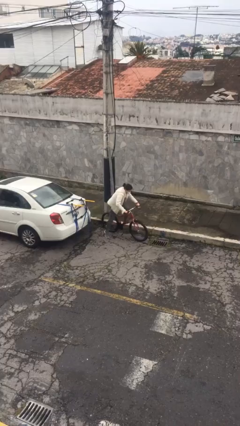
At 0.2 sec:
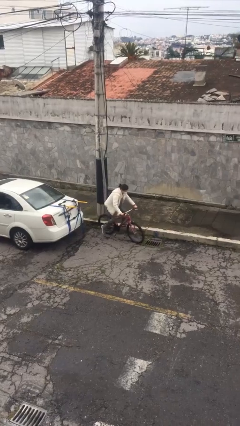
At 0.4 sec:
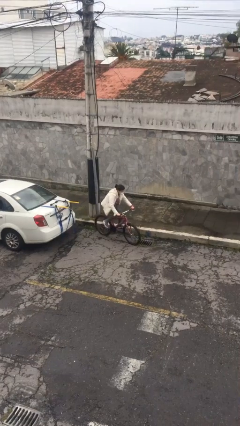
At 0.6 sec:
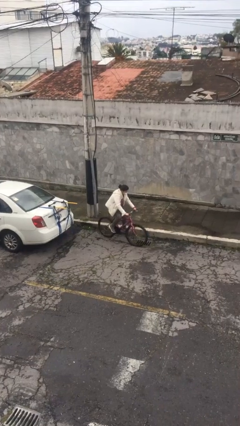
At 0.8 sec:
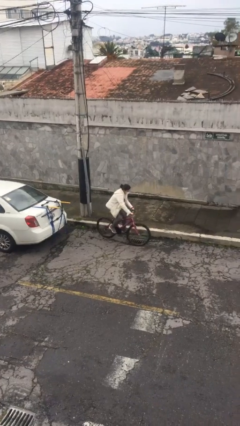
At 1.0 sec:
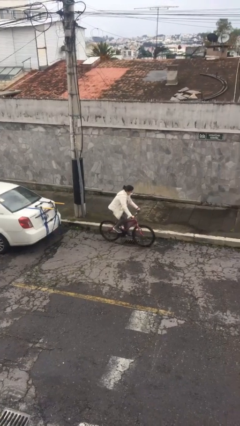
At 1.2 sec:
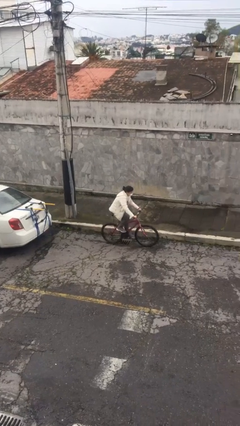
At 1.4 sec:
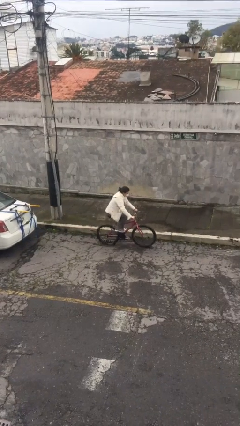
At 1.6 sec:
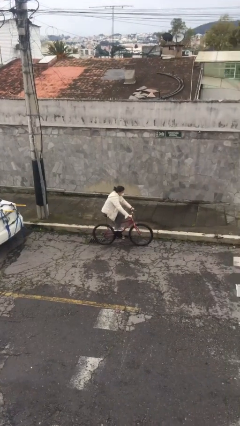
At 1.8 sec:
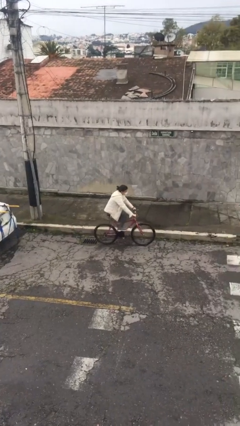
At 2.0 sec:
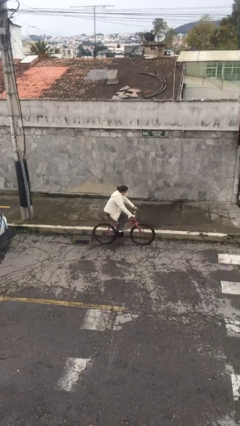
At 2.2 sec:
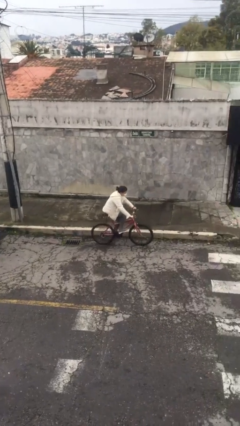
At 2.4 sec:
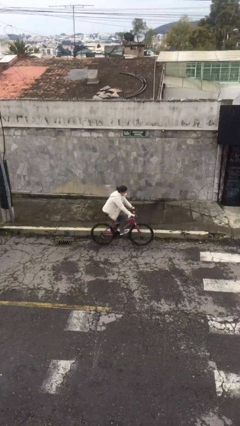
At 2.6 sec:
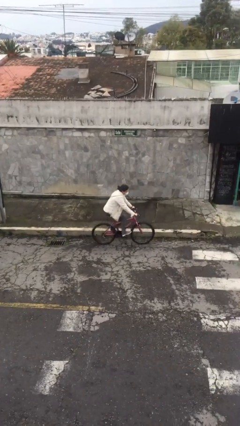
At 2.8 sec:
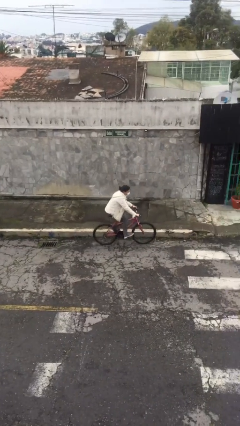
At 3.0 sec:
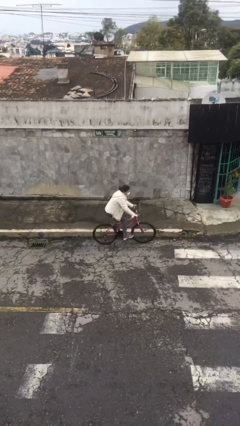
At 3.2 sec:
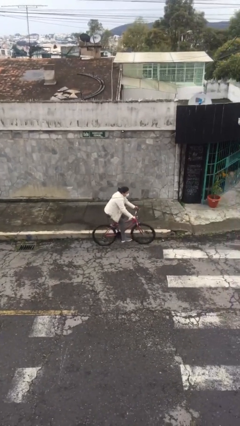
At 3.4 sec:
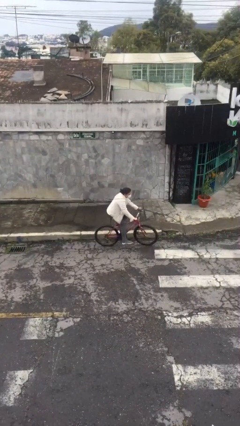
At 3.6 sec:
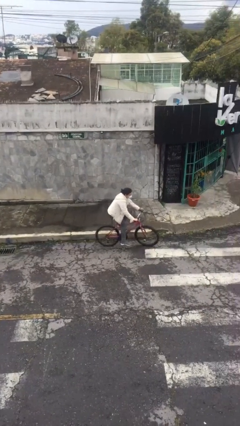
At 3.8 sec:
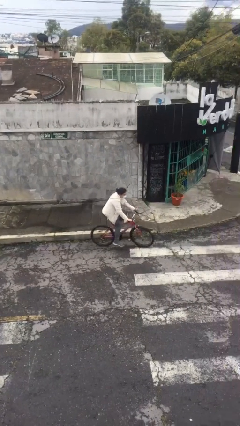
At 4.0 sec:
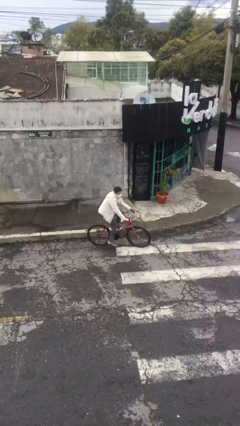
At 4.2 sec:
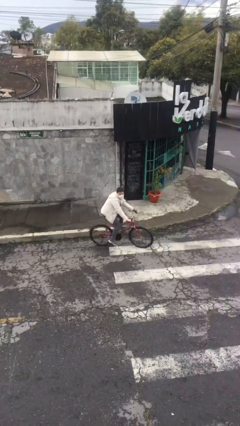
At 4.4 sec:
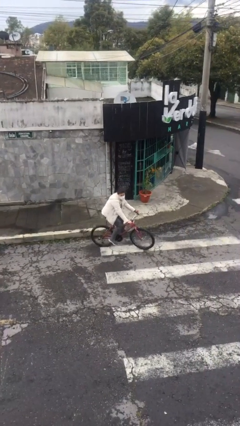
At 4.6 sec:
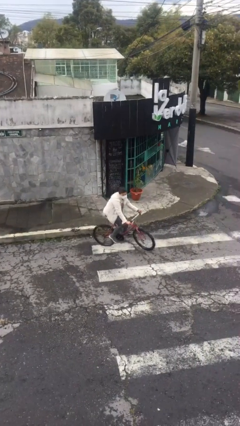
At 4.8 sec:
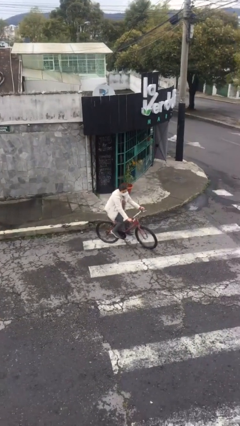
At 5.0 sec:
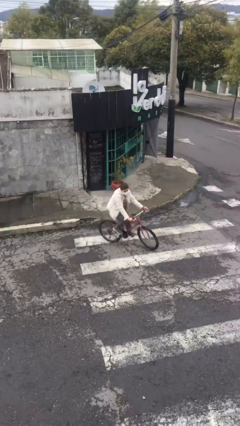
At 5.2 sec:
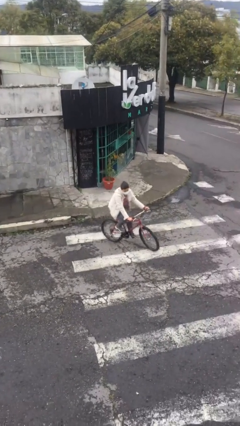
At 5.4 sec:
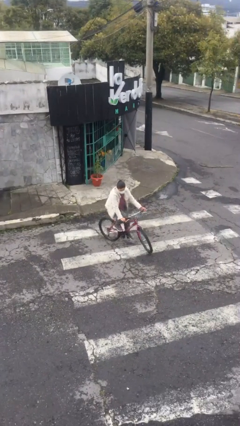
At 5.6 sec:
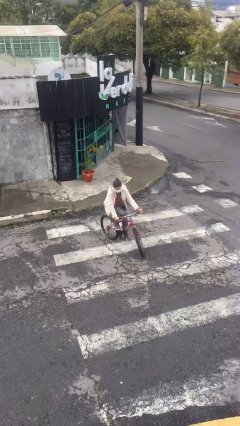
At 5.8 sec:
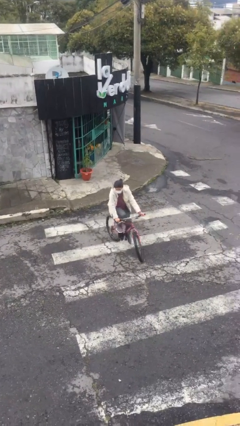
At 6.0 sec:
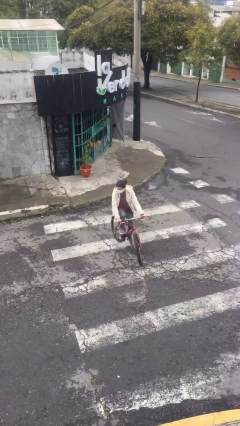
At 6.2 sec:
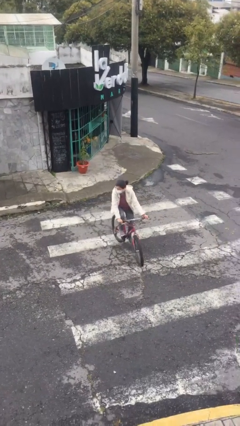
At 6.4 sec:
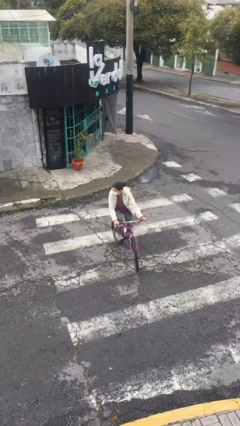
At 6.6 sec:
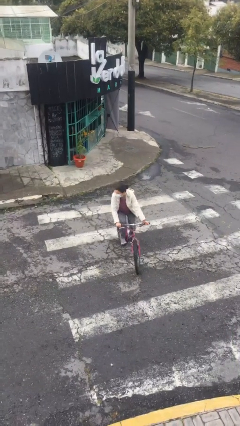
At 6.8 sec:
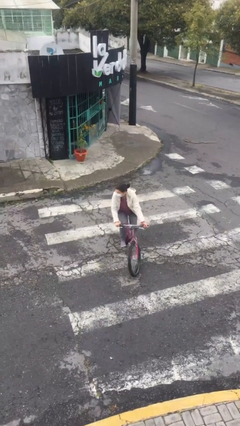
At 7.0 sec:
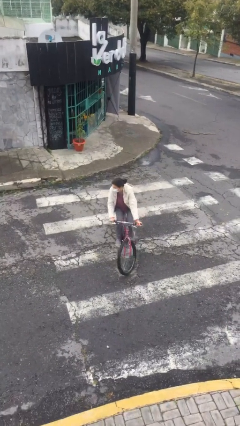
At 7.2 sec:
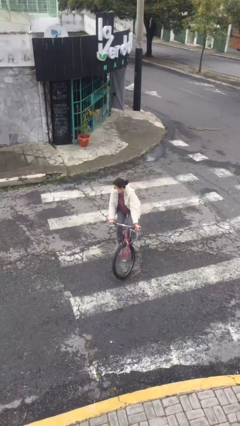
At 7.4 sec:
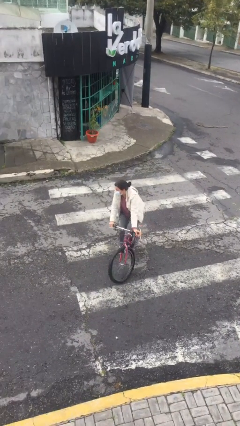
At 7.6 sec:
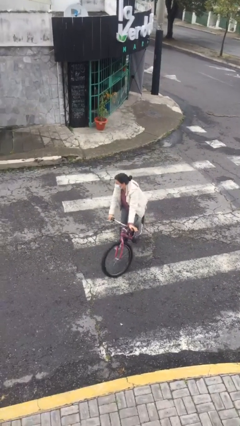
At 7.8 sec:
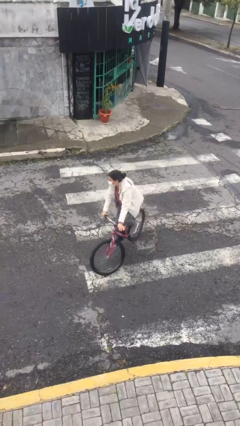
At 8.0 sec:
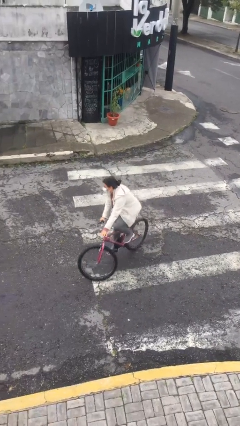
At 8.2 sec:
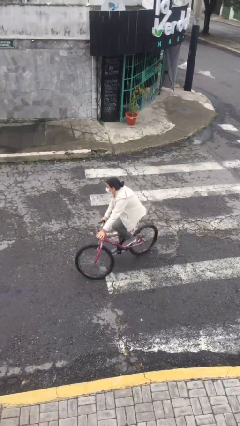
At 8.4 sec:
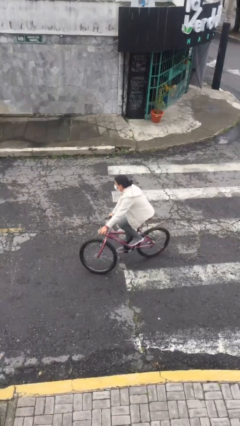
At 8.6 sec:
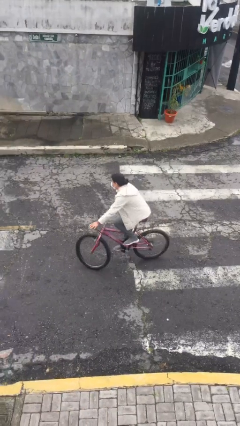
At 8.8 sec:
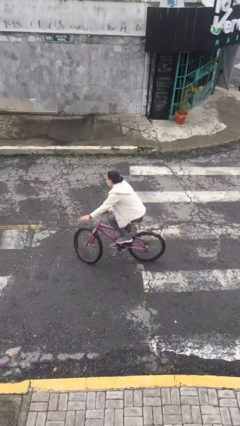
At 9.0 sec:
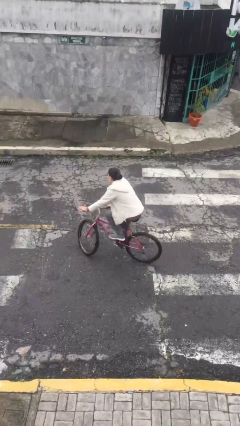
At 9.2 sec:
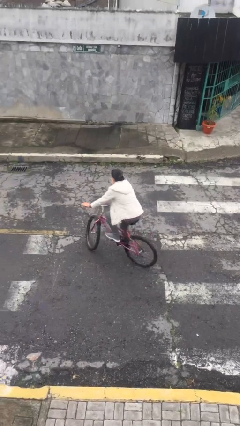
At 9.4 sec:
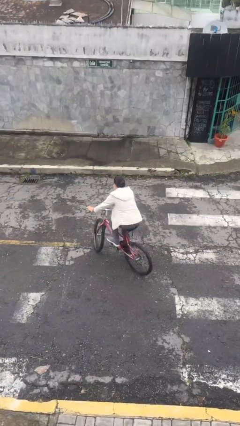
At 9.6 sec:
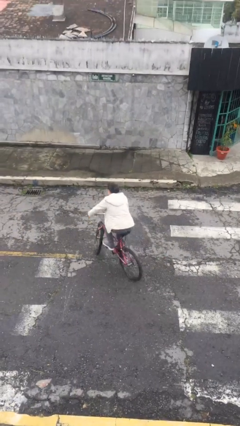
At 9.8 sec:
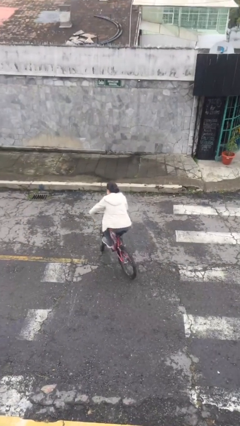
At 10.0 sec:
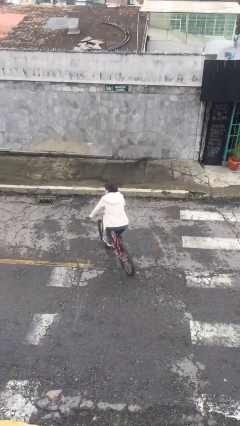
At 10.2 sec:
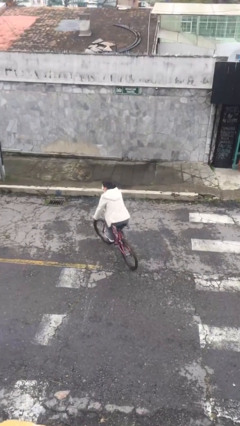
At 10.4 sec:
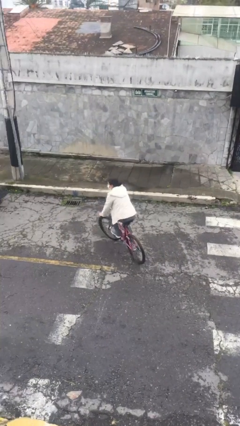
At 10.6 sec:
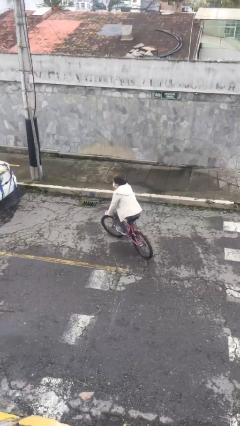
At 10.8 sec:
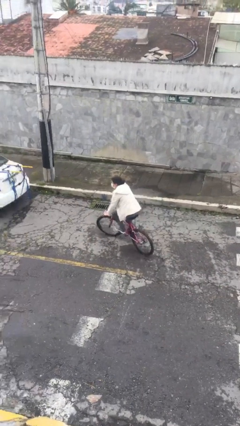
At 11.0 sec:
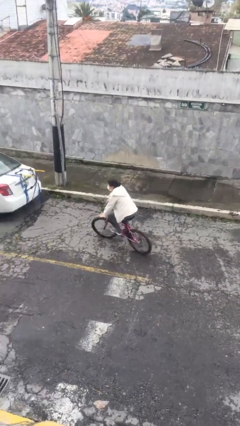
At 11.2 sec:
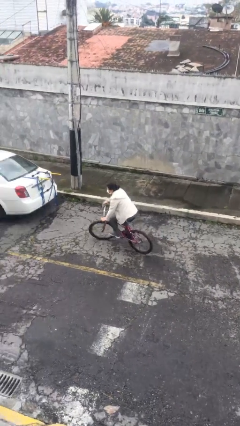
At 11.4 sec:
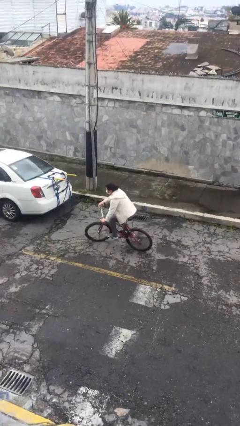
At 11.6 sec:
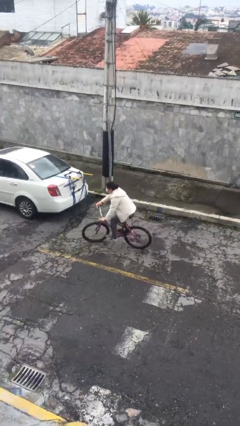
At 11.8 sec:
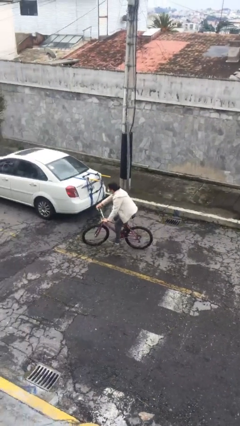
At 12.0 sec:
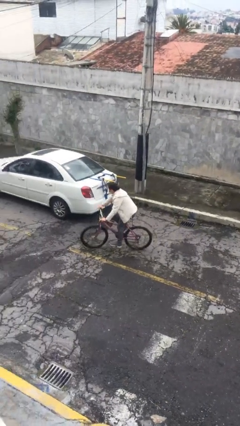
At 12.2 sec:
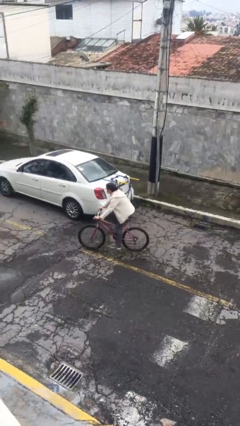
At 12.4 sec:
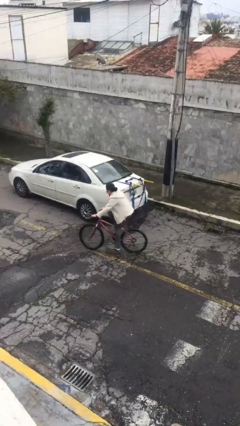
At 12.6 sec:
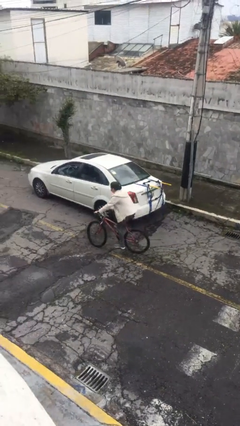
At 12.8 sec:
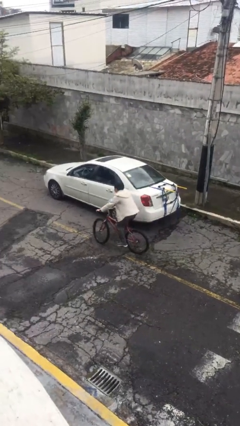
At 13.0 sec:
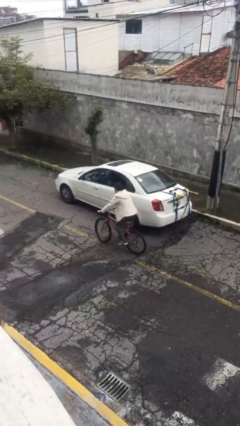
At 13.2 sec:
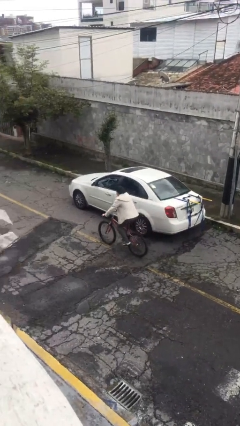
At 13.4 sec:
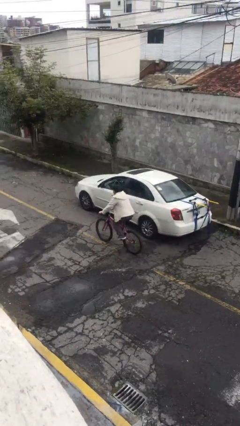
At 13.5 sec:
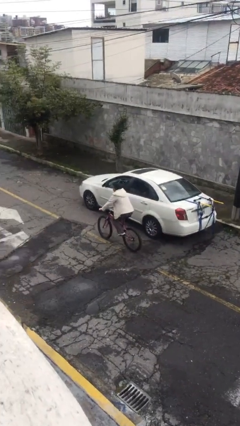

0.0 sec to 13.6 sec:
person rides bicycle

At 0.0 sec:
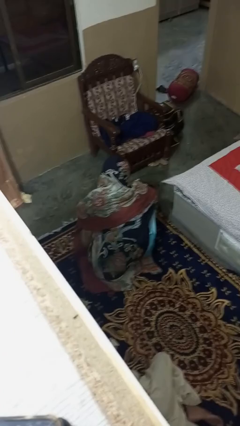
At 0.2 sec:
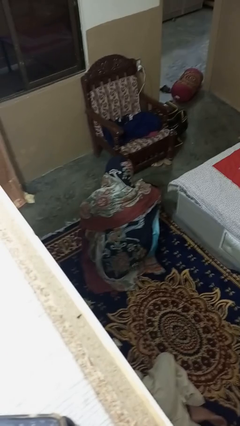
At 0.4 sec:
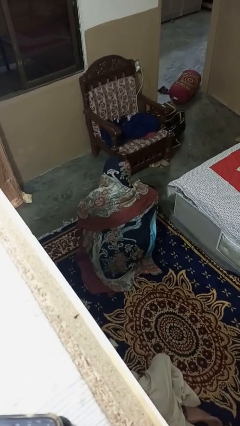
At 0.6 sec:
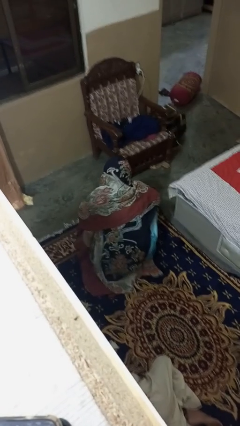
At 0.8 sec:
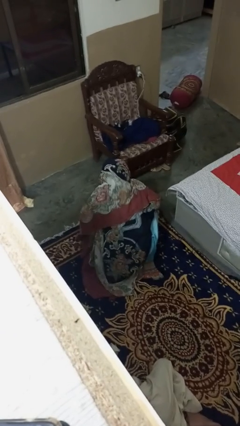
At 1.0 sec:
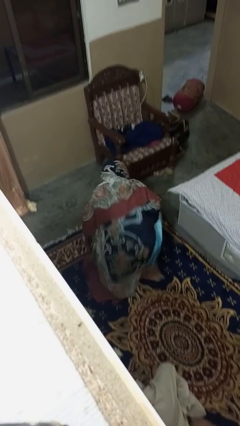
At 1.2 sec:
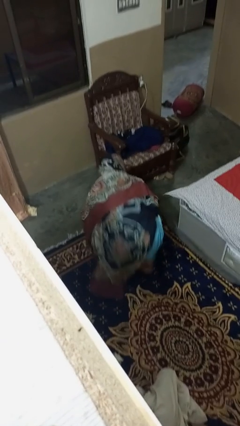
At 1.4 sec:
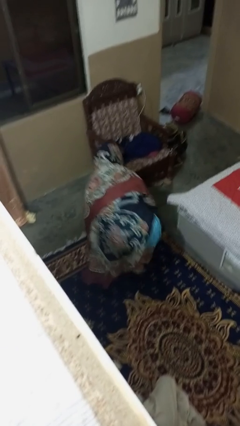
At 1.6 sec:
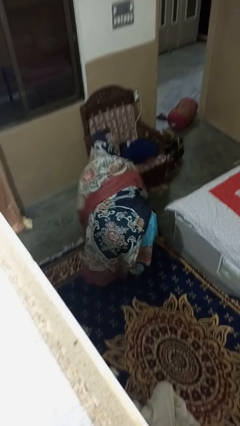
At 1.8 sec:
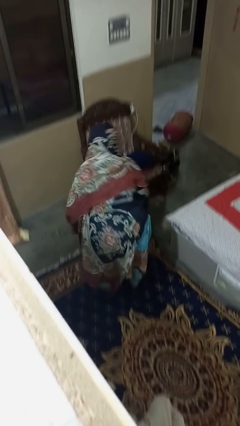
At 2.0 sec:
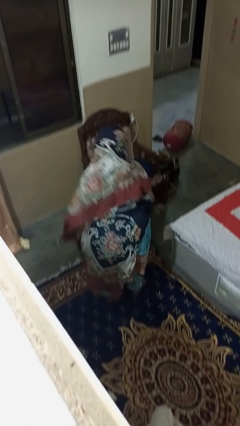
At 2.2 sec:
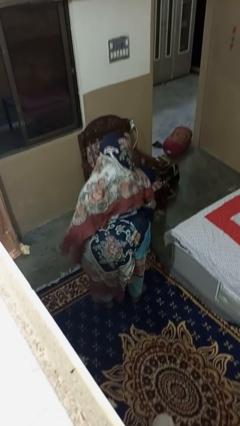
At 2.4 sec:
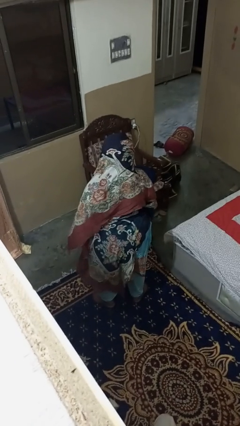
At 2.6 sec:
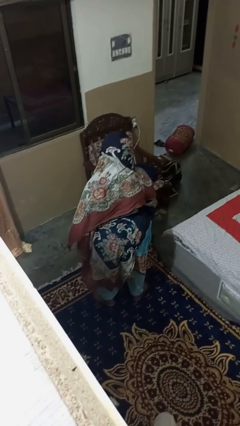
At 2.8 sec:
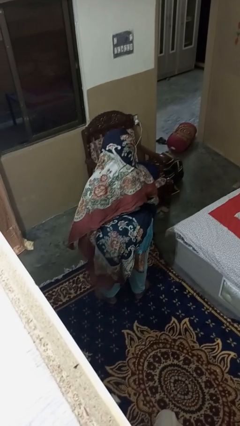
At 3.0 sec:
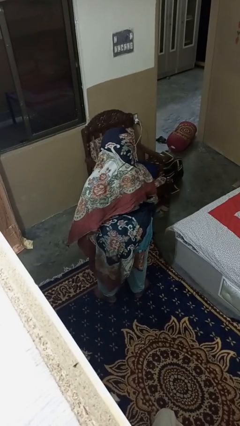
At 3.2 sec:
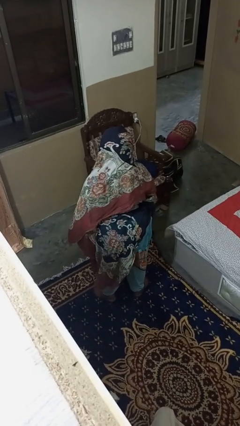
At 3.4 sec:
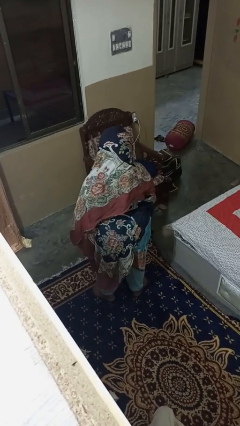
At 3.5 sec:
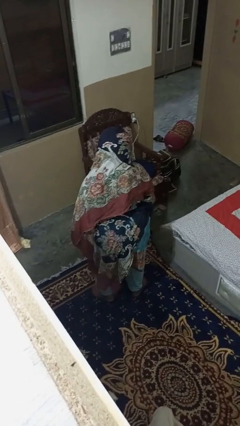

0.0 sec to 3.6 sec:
person stands up

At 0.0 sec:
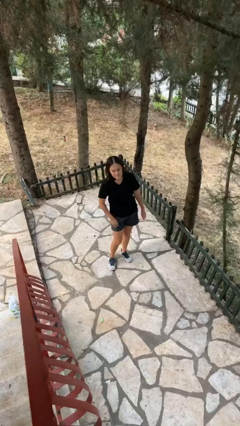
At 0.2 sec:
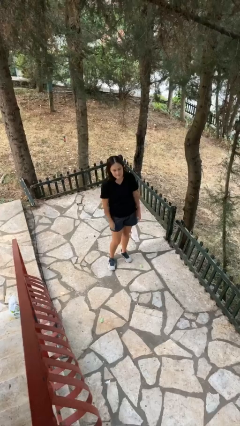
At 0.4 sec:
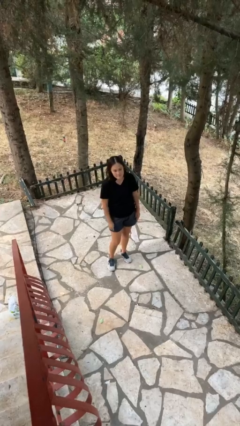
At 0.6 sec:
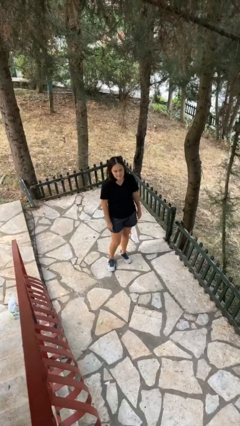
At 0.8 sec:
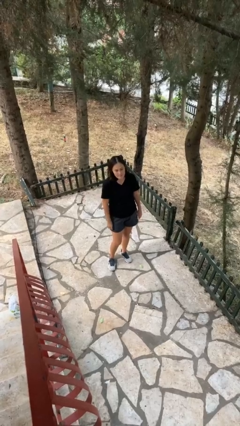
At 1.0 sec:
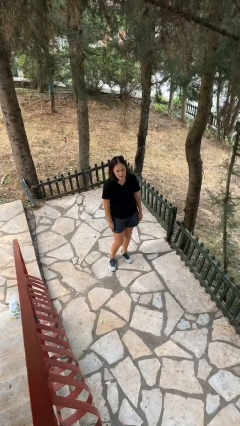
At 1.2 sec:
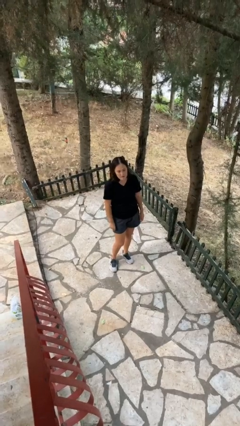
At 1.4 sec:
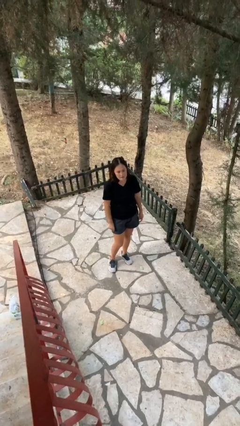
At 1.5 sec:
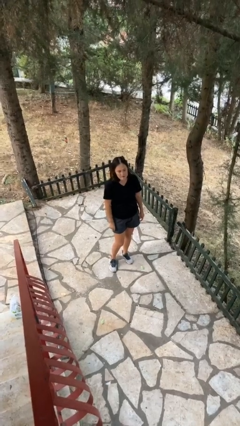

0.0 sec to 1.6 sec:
person gestures lower hand
